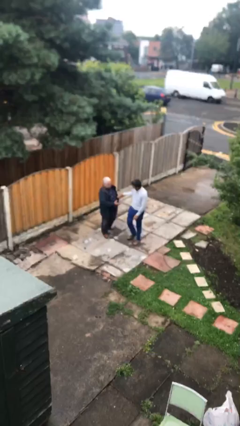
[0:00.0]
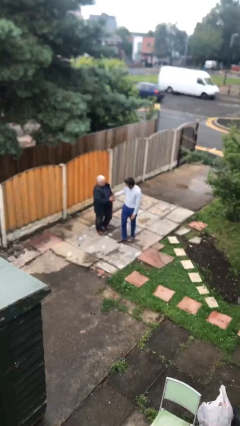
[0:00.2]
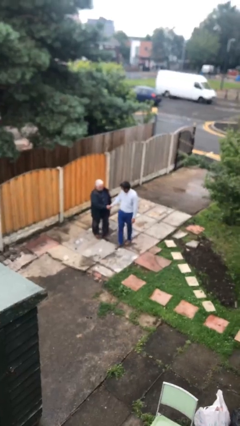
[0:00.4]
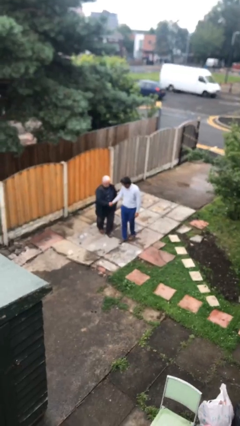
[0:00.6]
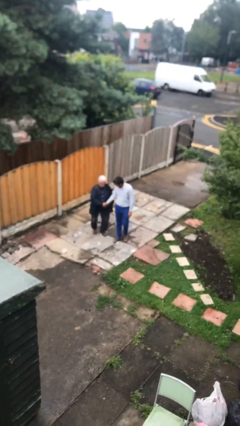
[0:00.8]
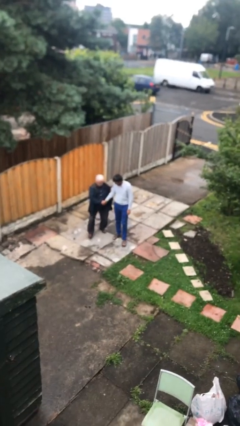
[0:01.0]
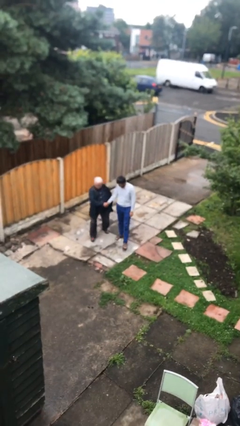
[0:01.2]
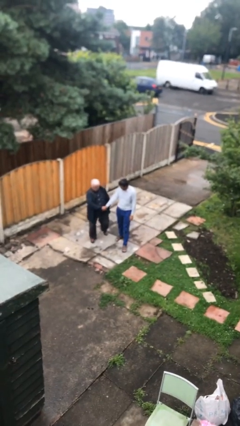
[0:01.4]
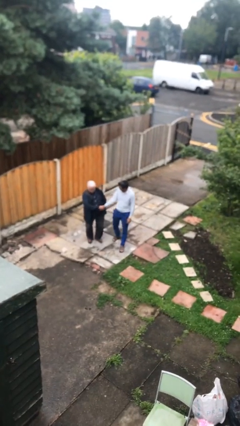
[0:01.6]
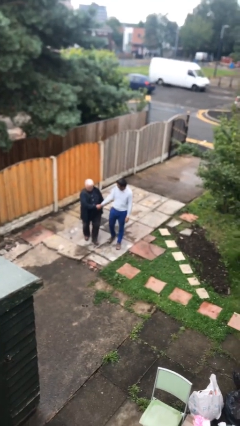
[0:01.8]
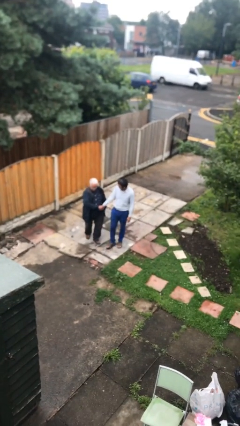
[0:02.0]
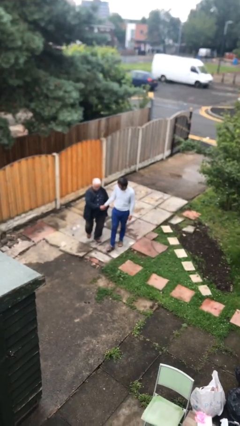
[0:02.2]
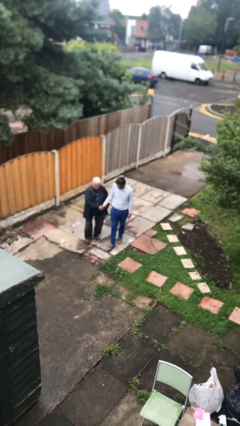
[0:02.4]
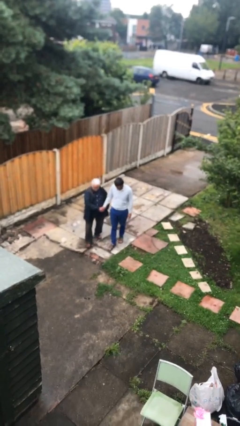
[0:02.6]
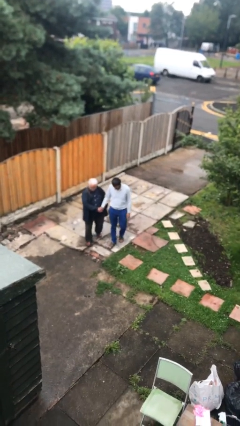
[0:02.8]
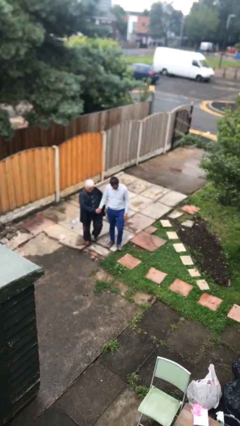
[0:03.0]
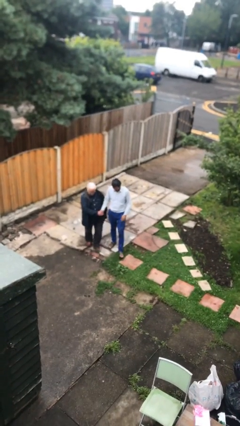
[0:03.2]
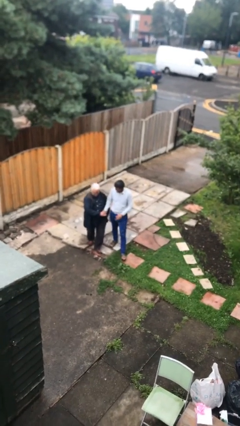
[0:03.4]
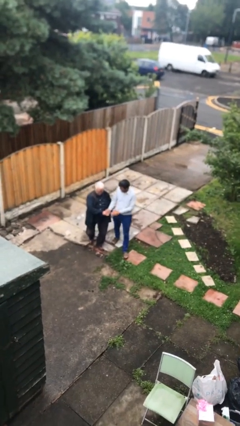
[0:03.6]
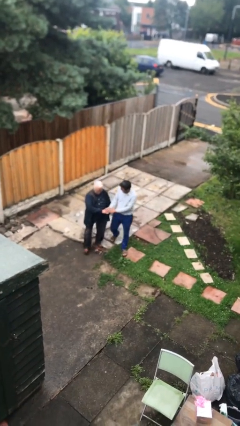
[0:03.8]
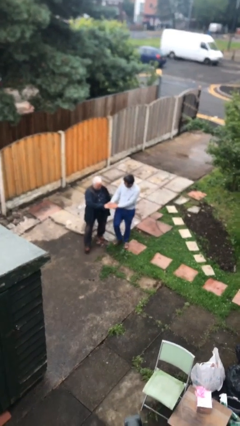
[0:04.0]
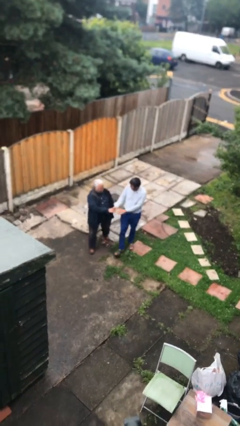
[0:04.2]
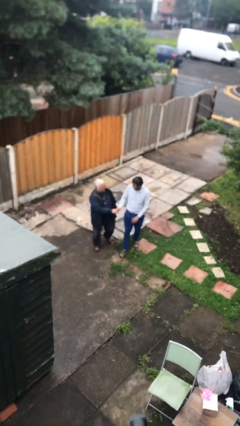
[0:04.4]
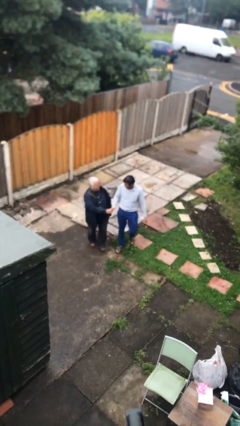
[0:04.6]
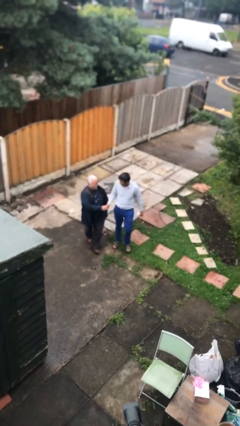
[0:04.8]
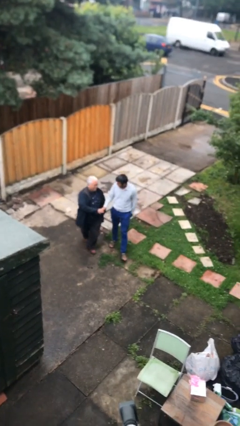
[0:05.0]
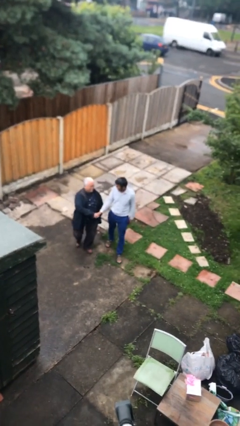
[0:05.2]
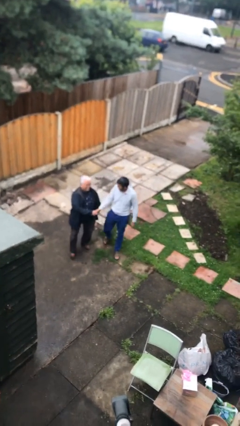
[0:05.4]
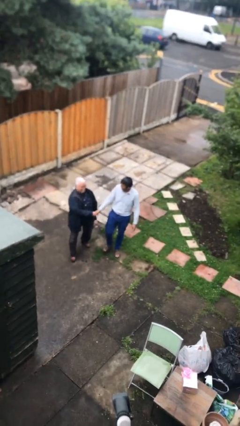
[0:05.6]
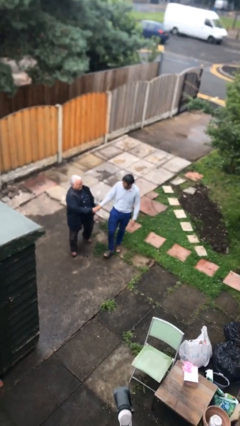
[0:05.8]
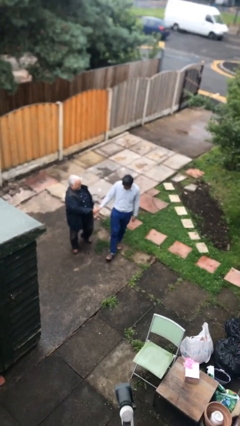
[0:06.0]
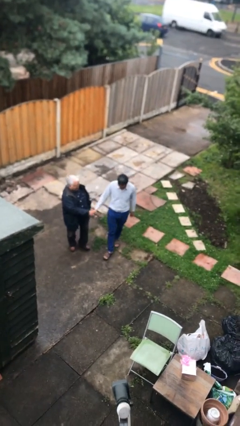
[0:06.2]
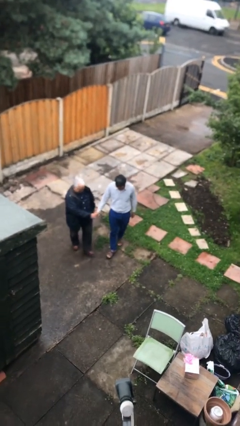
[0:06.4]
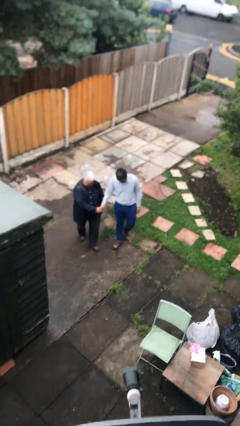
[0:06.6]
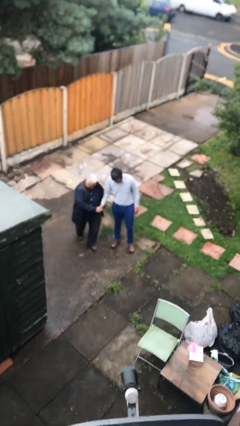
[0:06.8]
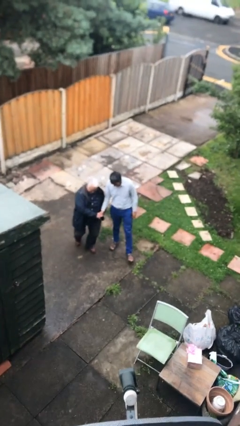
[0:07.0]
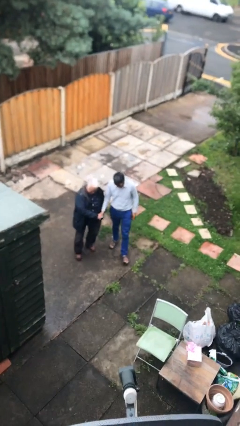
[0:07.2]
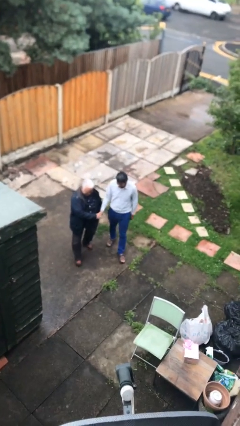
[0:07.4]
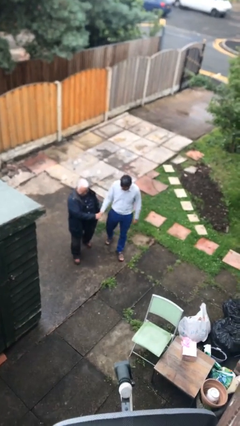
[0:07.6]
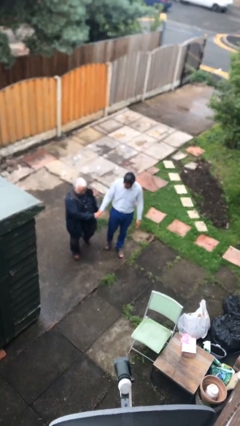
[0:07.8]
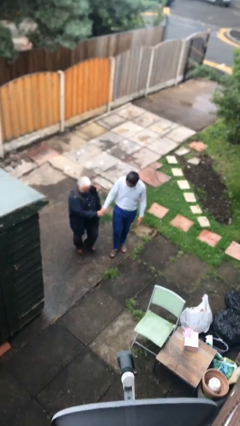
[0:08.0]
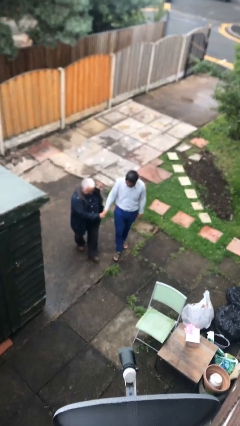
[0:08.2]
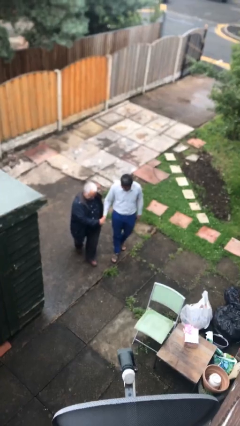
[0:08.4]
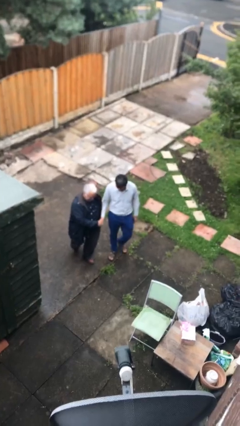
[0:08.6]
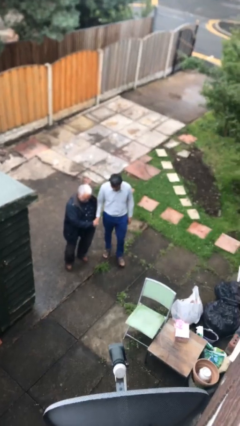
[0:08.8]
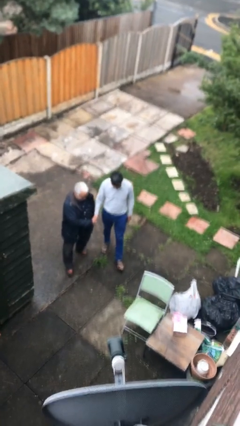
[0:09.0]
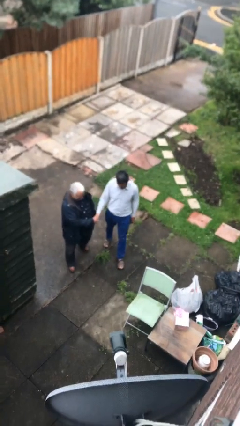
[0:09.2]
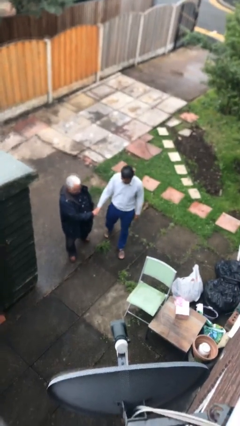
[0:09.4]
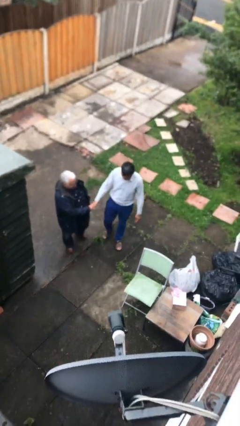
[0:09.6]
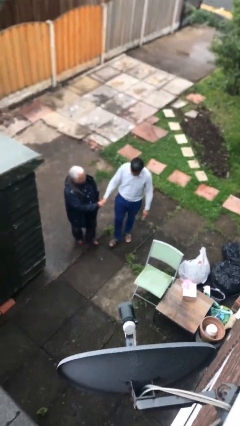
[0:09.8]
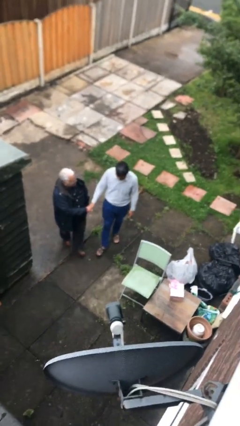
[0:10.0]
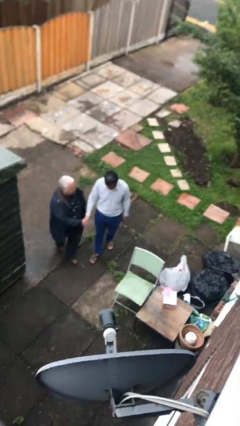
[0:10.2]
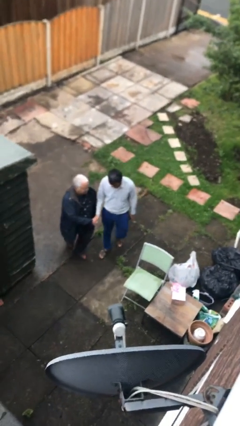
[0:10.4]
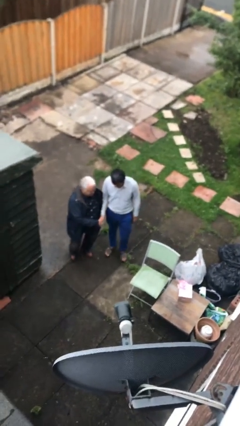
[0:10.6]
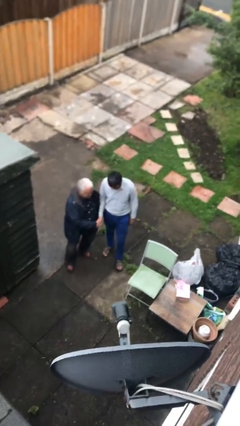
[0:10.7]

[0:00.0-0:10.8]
person holds hand

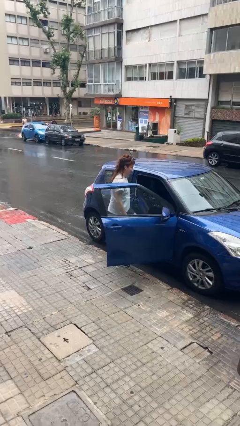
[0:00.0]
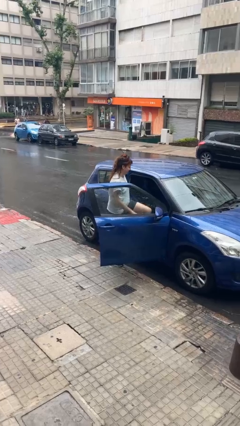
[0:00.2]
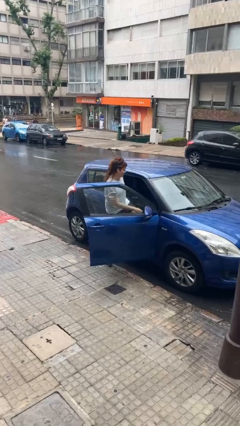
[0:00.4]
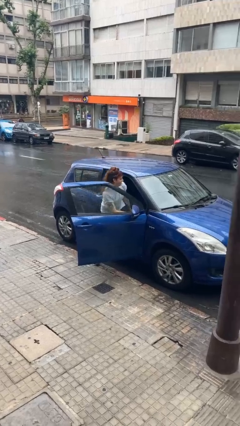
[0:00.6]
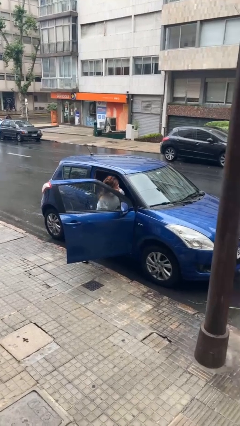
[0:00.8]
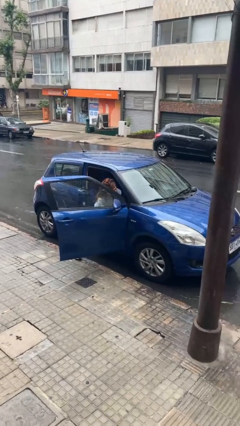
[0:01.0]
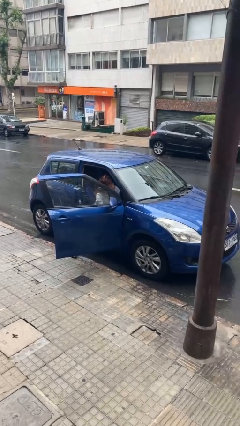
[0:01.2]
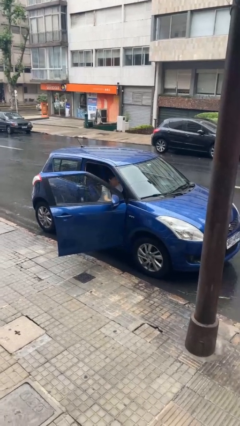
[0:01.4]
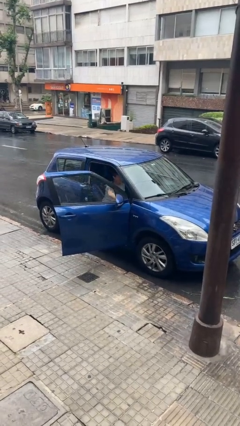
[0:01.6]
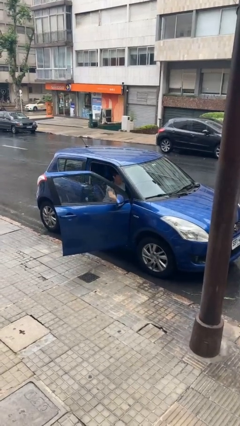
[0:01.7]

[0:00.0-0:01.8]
person enters car

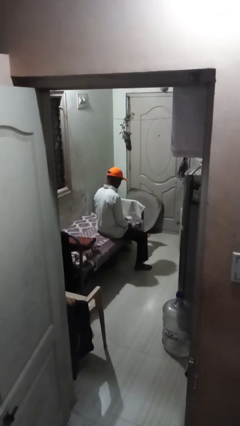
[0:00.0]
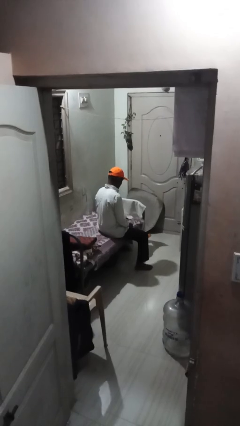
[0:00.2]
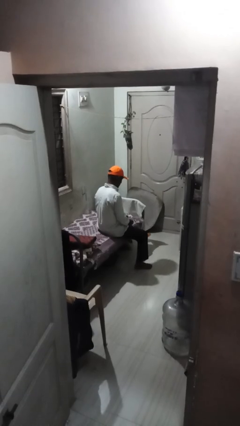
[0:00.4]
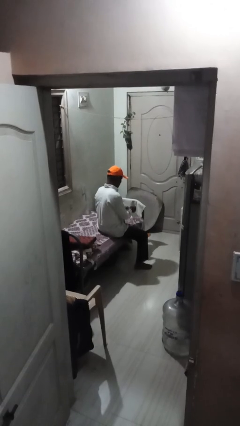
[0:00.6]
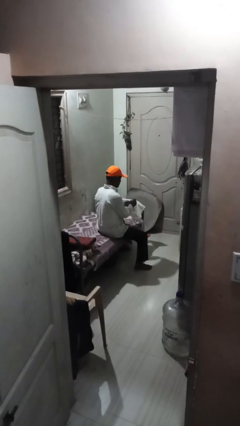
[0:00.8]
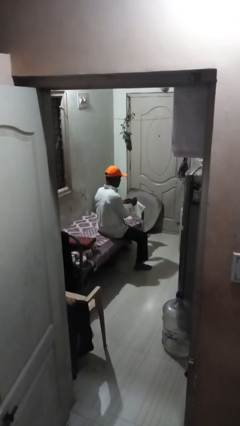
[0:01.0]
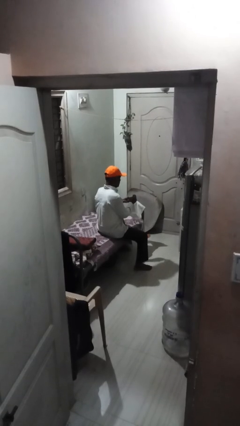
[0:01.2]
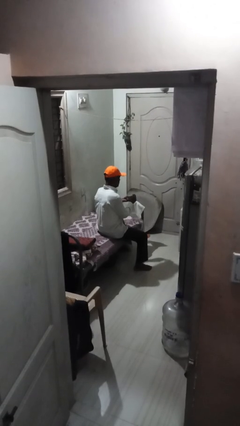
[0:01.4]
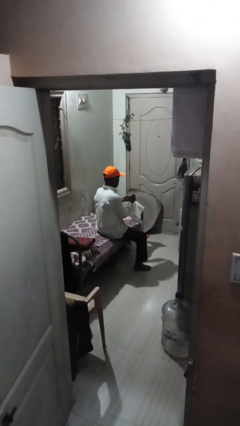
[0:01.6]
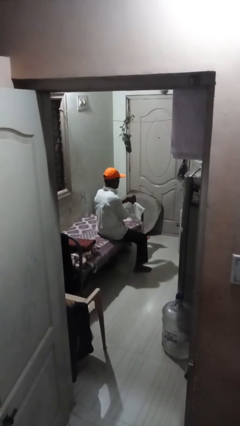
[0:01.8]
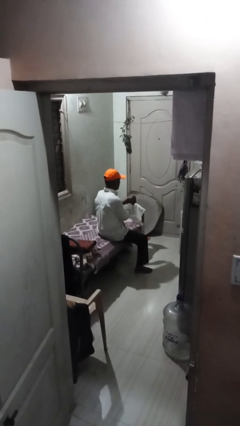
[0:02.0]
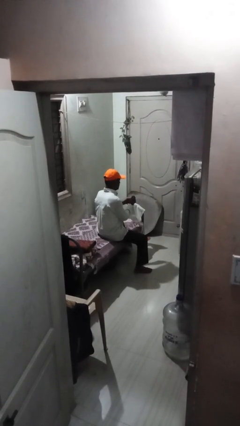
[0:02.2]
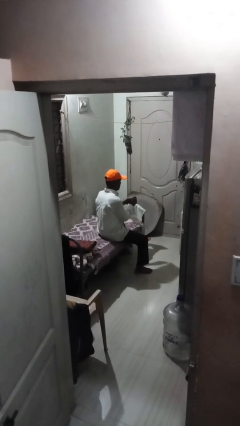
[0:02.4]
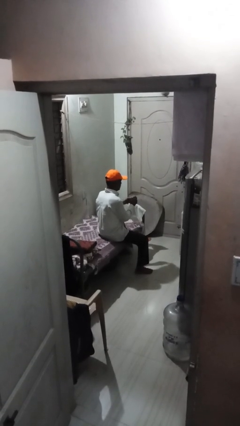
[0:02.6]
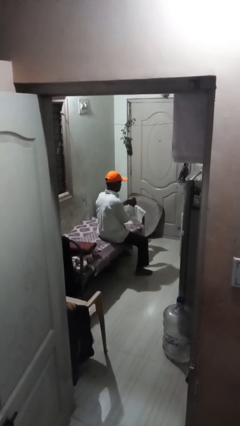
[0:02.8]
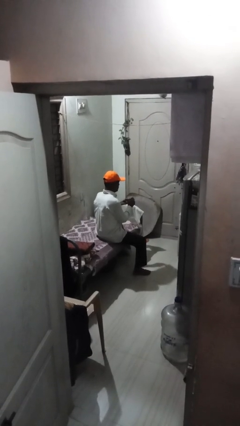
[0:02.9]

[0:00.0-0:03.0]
person files fingernails

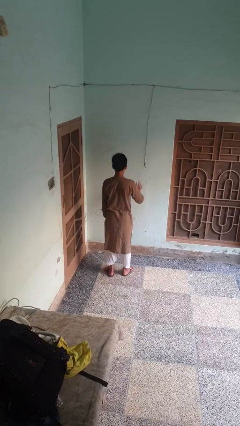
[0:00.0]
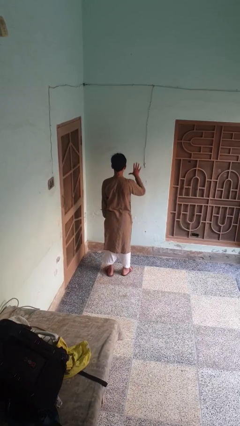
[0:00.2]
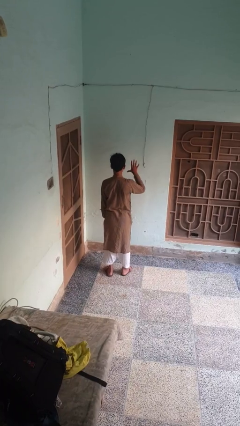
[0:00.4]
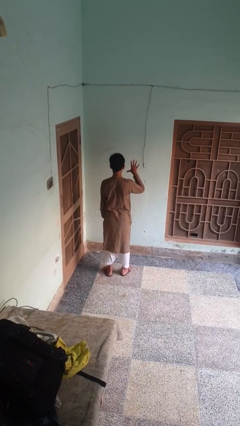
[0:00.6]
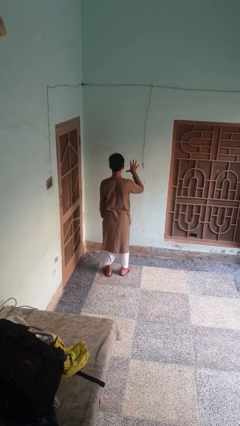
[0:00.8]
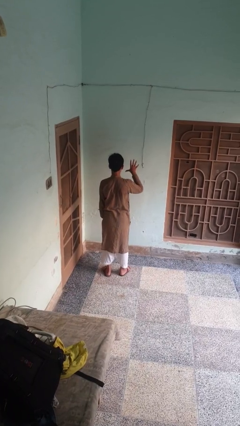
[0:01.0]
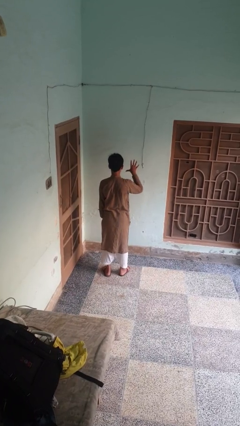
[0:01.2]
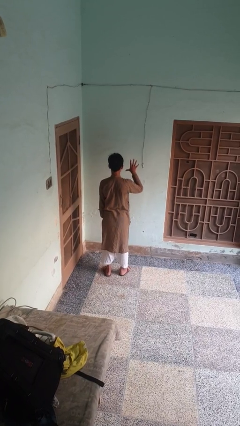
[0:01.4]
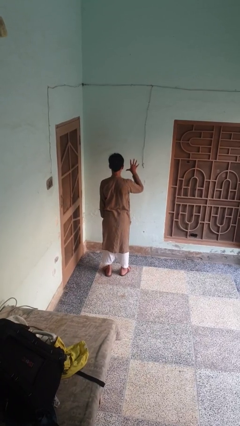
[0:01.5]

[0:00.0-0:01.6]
person gestures number five

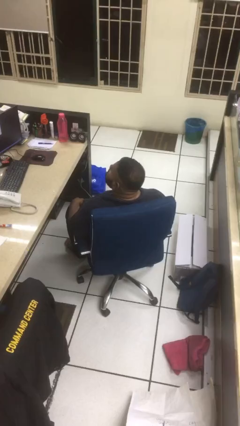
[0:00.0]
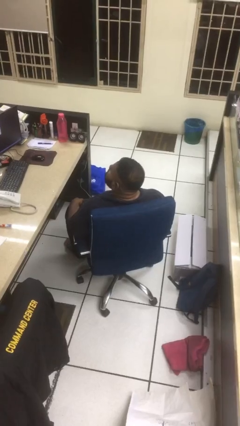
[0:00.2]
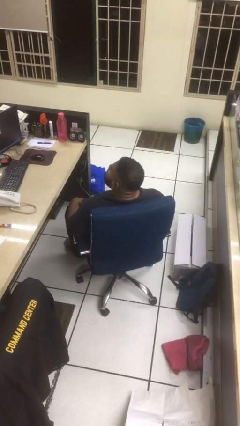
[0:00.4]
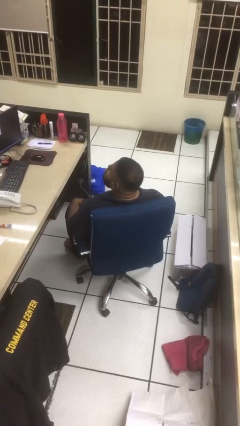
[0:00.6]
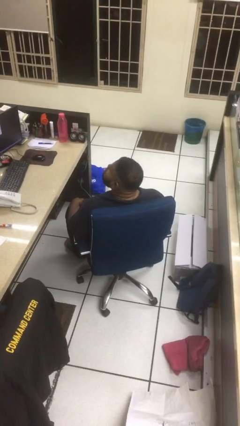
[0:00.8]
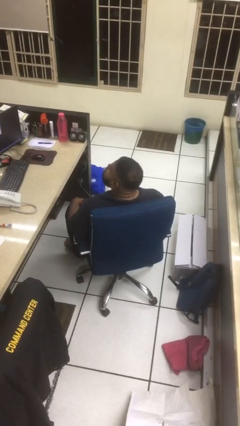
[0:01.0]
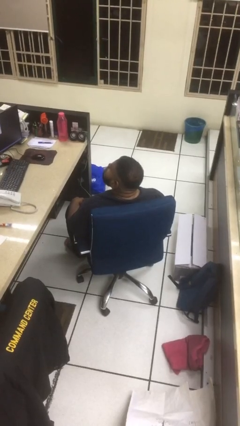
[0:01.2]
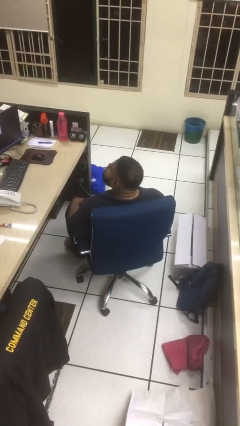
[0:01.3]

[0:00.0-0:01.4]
person sticks out tongue
